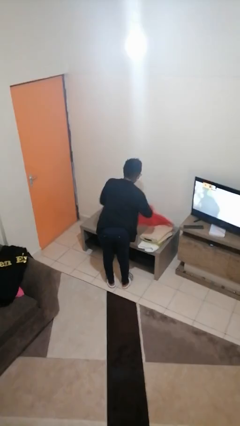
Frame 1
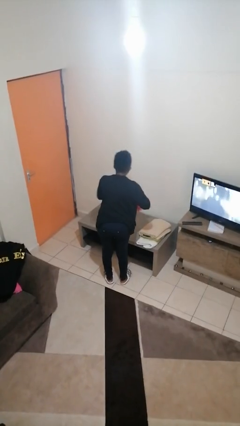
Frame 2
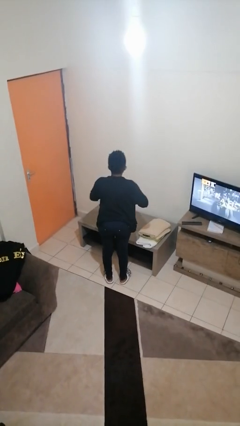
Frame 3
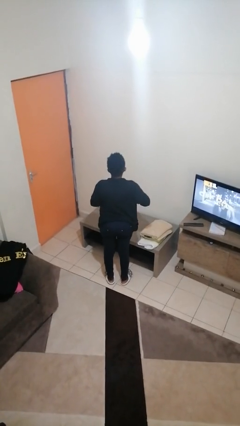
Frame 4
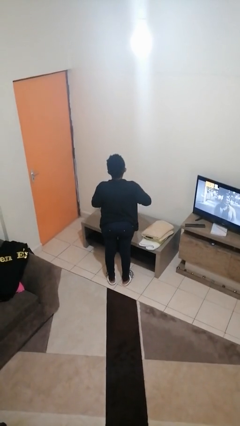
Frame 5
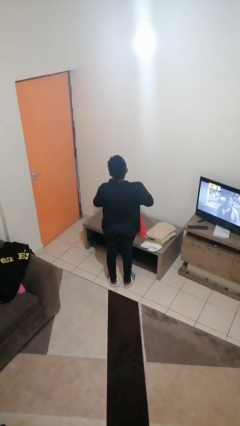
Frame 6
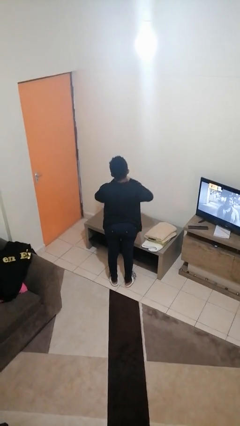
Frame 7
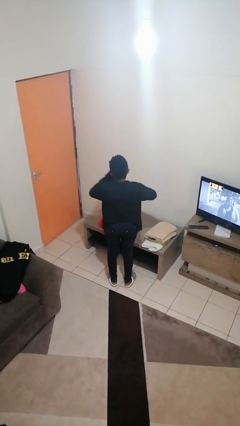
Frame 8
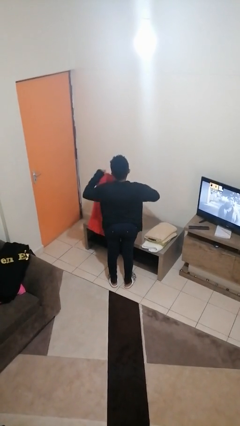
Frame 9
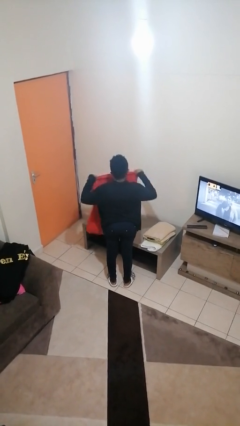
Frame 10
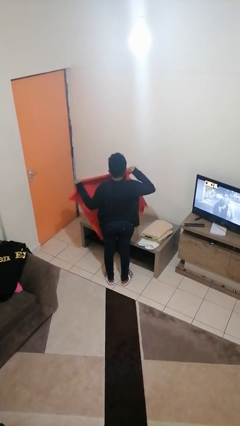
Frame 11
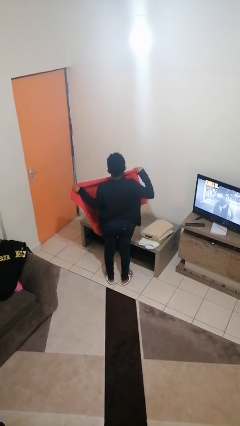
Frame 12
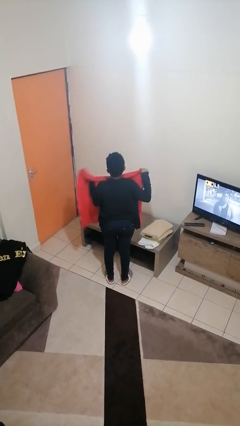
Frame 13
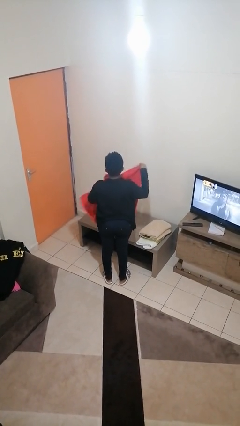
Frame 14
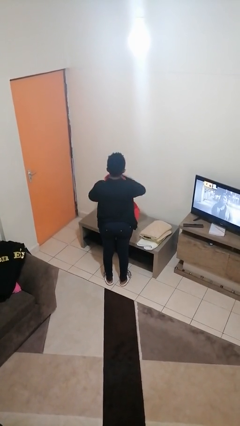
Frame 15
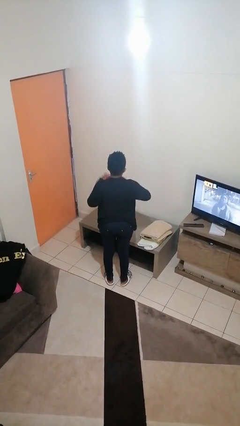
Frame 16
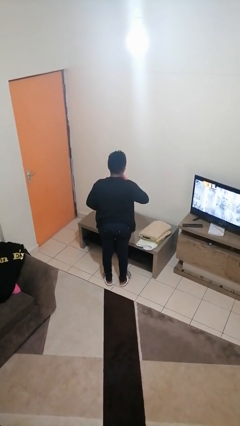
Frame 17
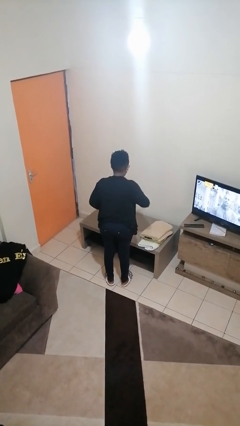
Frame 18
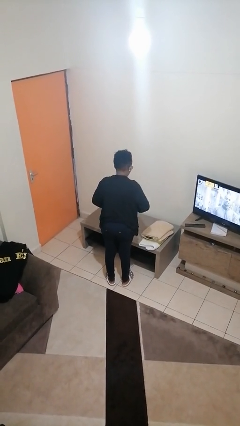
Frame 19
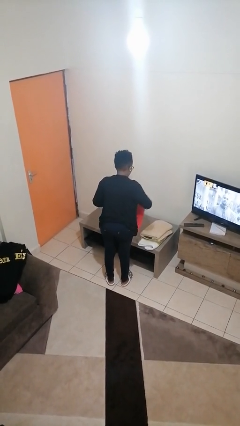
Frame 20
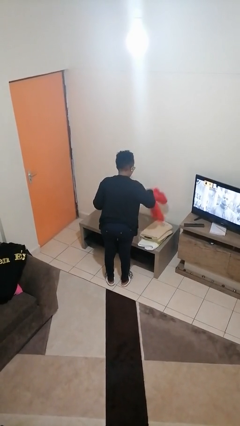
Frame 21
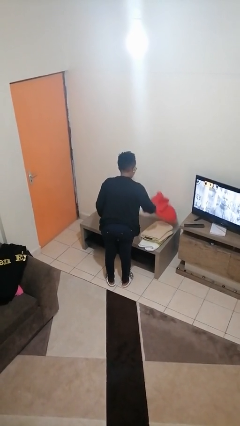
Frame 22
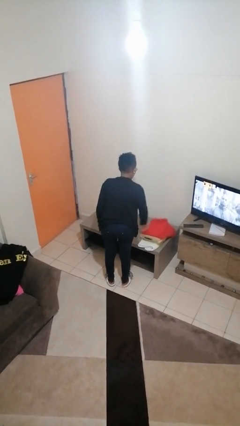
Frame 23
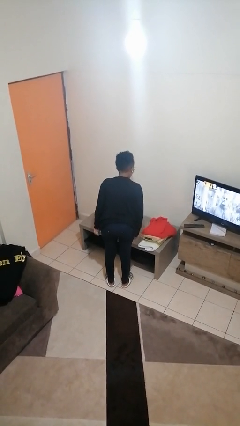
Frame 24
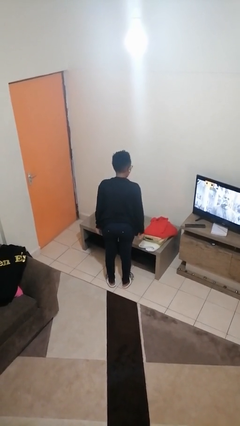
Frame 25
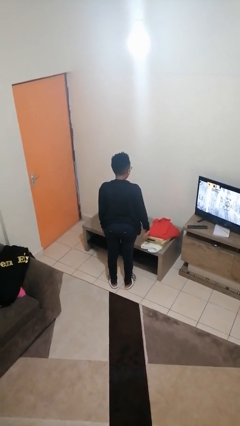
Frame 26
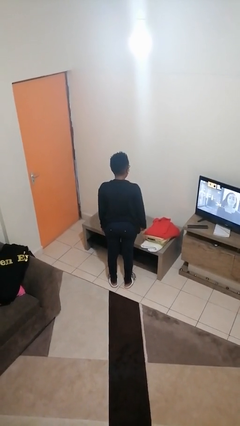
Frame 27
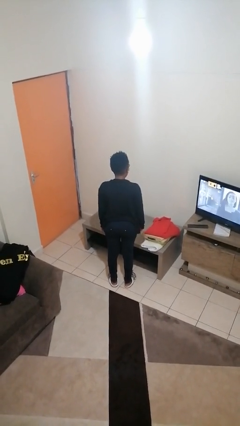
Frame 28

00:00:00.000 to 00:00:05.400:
person folds towel

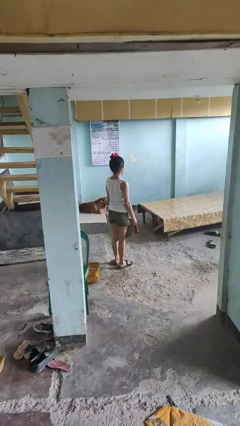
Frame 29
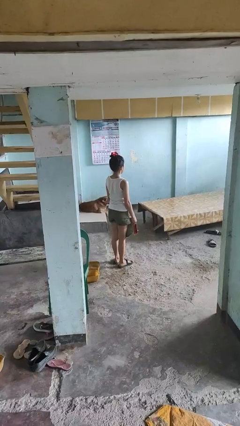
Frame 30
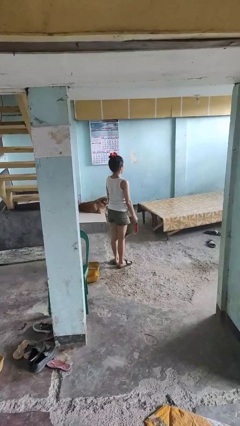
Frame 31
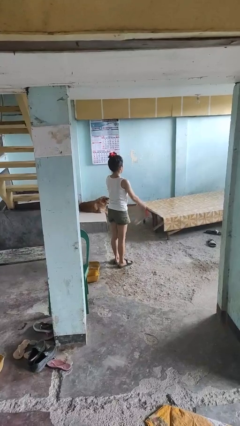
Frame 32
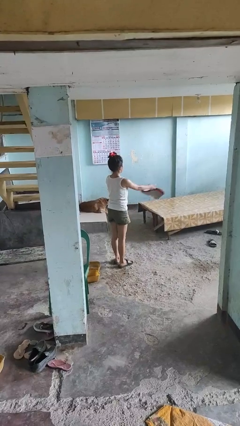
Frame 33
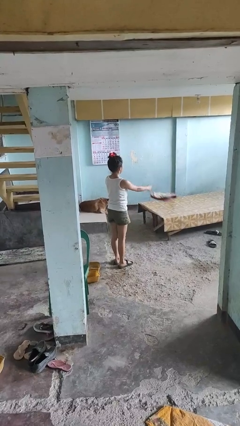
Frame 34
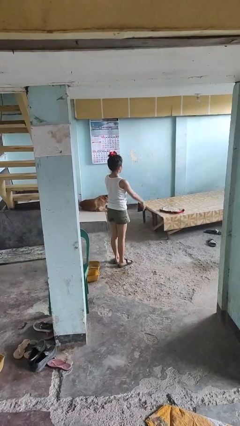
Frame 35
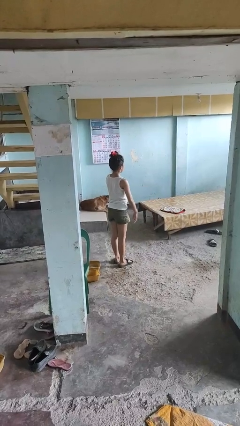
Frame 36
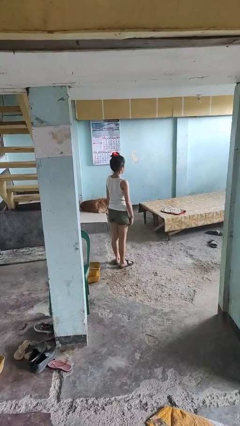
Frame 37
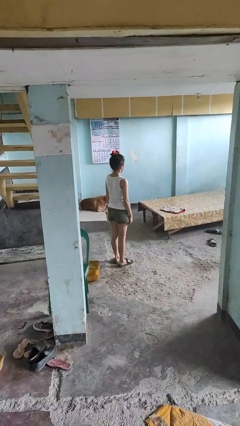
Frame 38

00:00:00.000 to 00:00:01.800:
person throws object on table

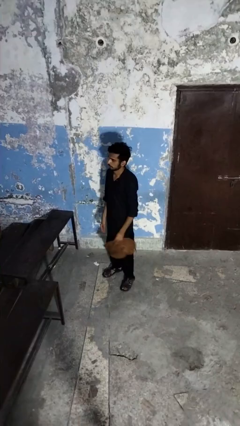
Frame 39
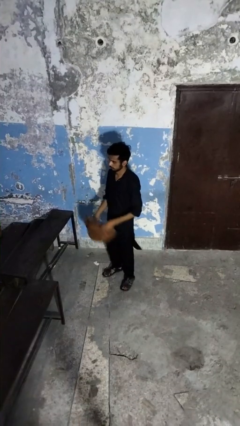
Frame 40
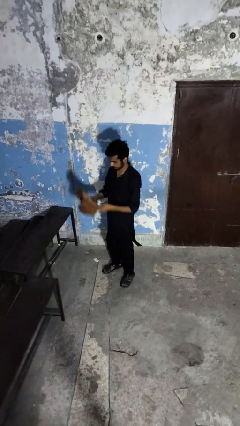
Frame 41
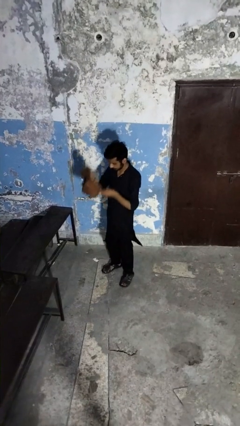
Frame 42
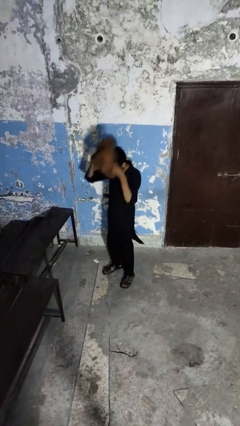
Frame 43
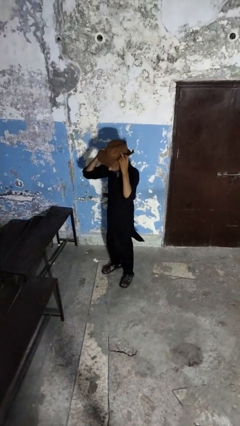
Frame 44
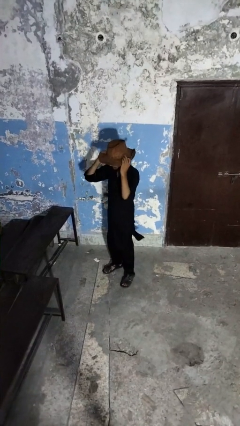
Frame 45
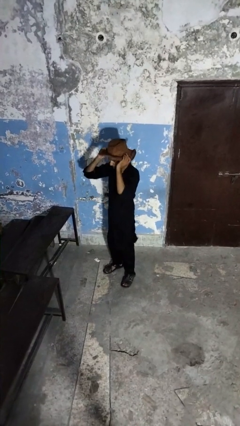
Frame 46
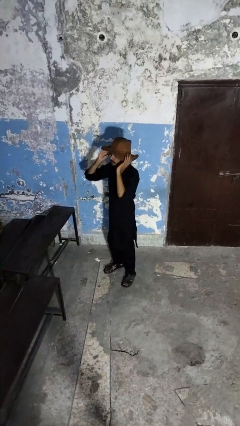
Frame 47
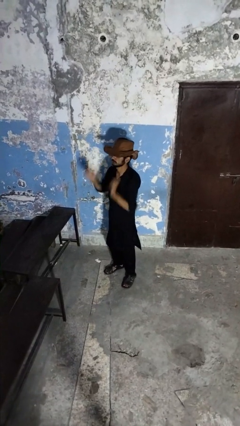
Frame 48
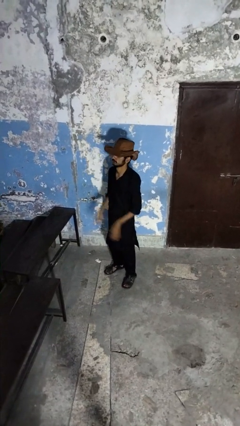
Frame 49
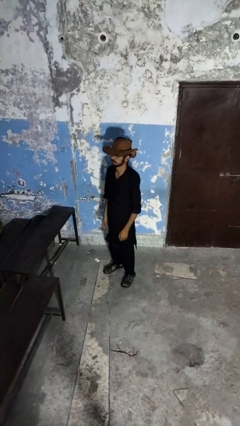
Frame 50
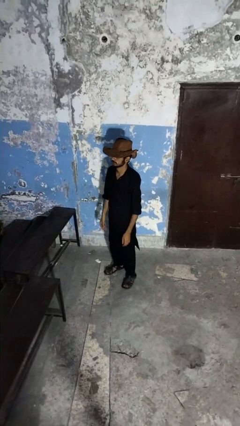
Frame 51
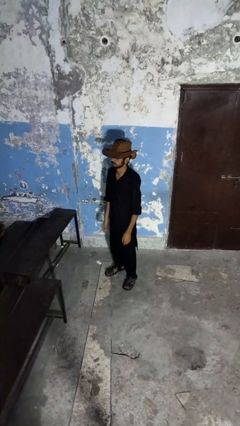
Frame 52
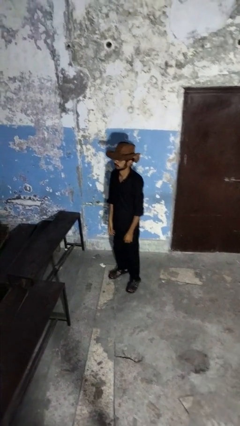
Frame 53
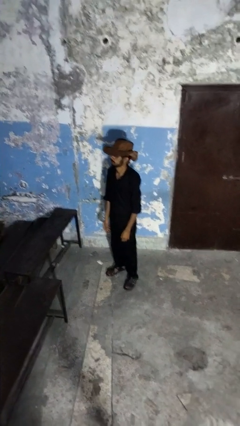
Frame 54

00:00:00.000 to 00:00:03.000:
person puts on hat

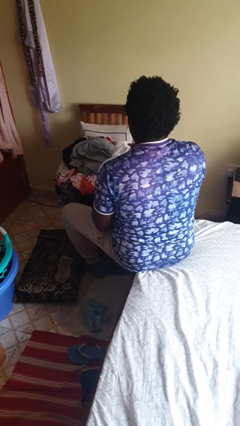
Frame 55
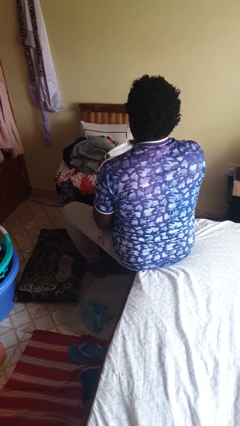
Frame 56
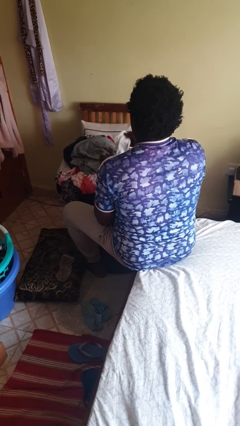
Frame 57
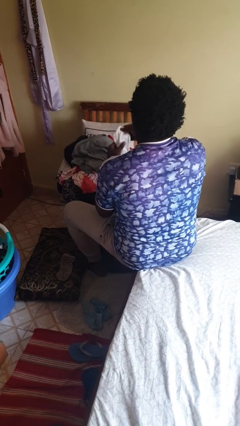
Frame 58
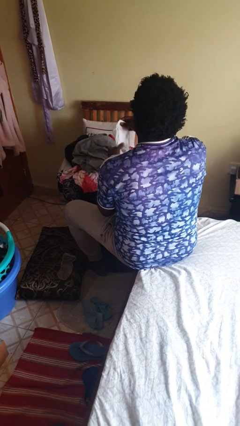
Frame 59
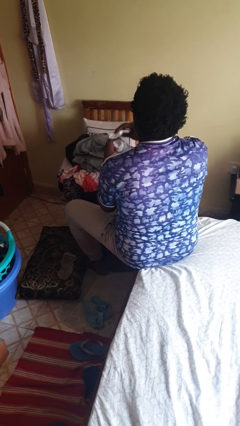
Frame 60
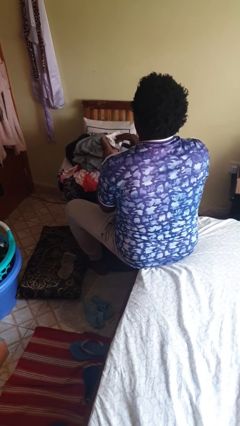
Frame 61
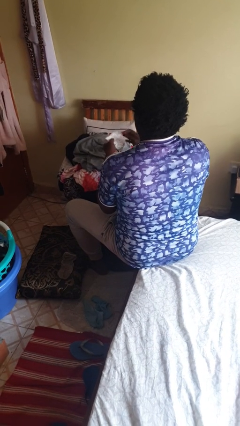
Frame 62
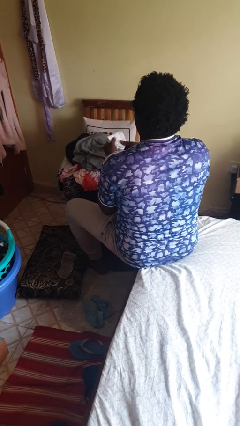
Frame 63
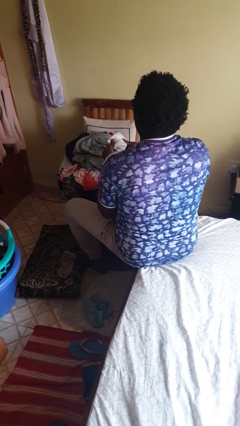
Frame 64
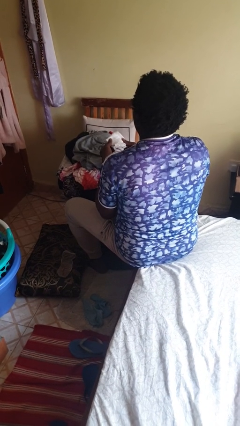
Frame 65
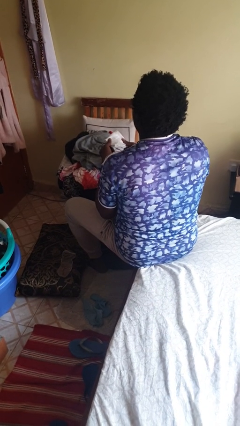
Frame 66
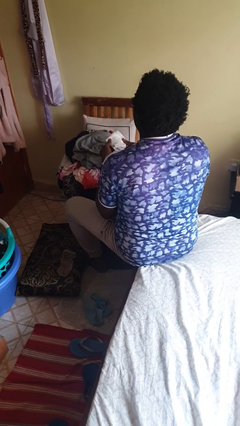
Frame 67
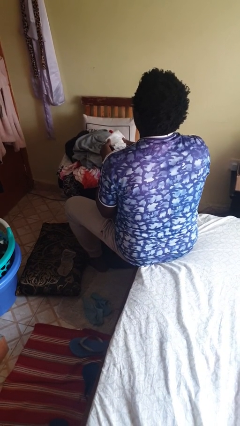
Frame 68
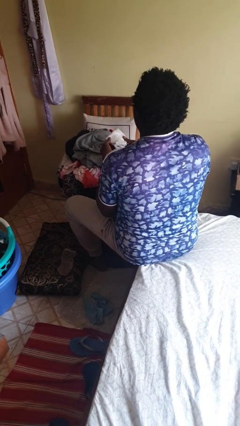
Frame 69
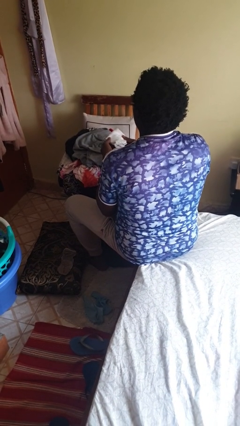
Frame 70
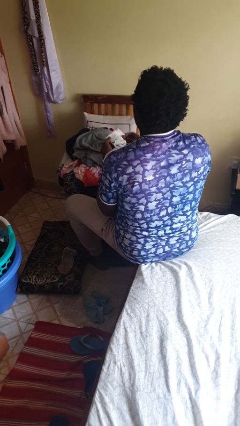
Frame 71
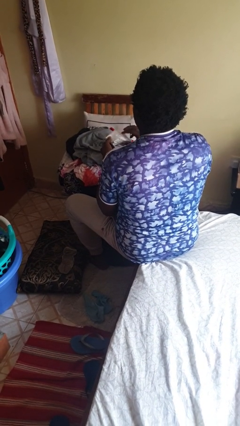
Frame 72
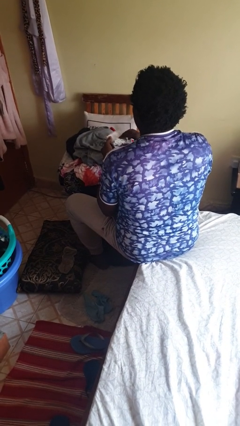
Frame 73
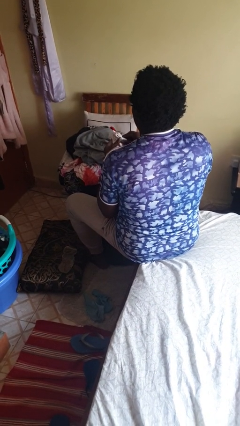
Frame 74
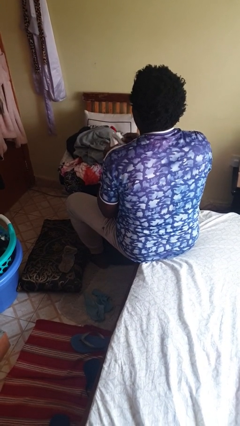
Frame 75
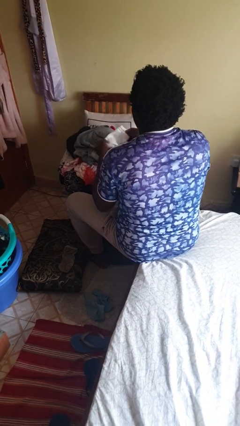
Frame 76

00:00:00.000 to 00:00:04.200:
person folds socks

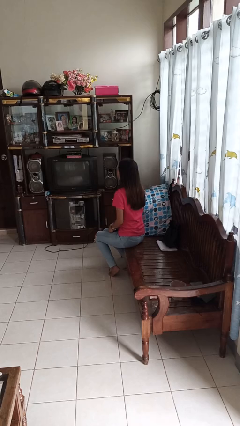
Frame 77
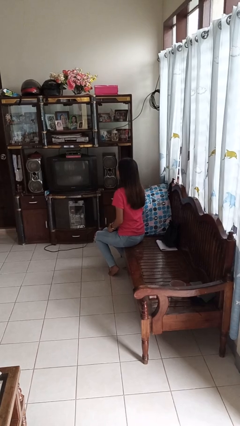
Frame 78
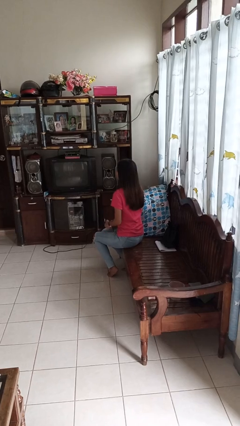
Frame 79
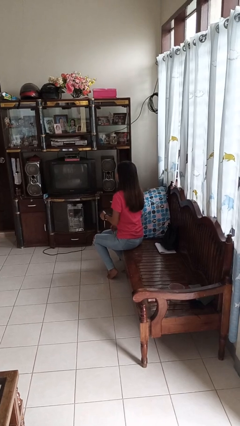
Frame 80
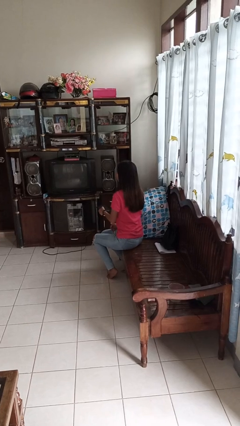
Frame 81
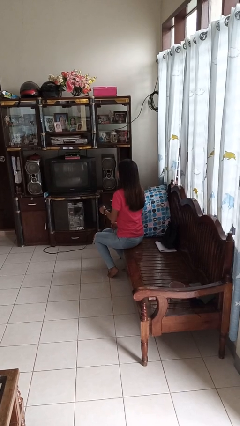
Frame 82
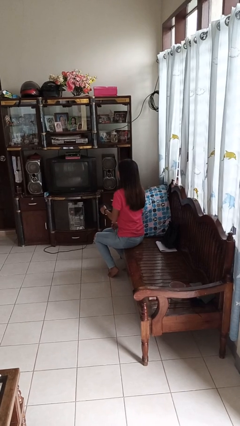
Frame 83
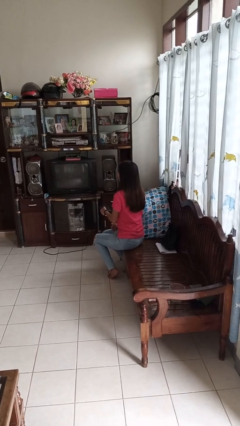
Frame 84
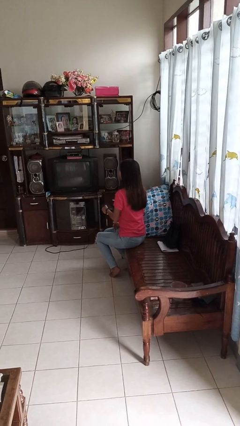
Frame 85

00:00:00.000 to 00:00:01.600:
person uses television remote

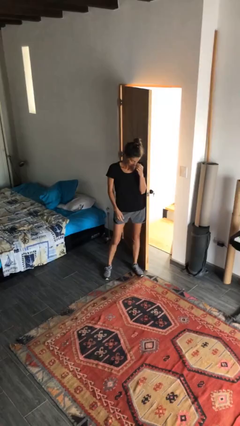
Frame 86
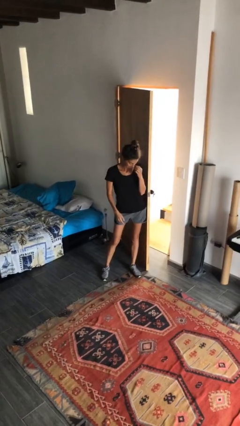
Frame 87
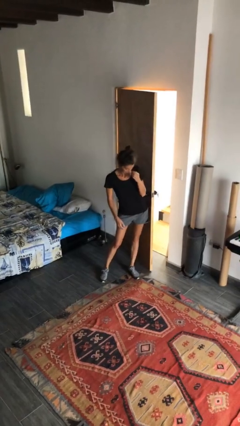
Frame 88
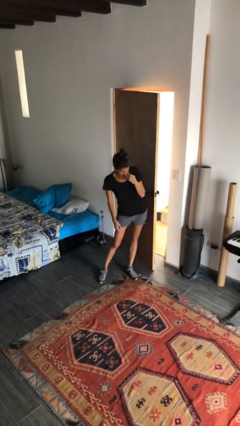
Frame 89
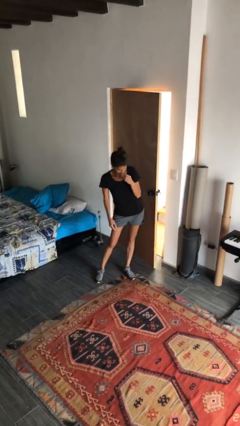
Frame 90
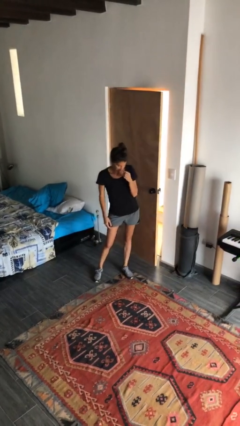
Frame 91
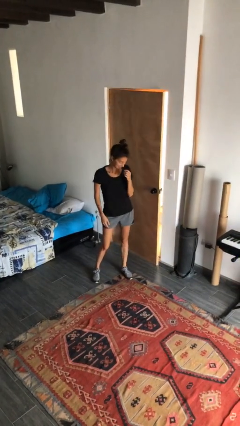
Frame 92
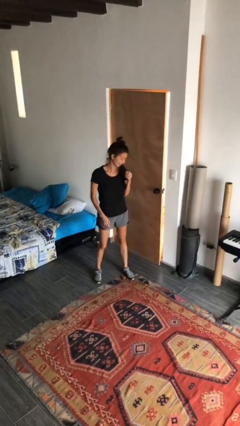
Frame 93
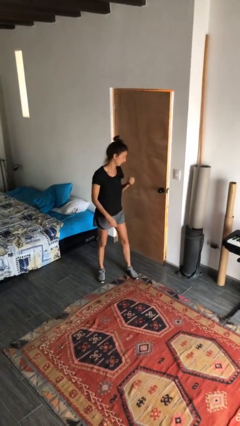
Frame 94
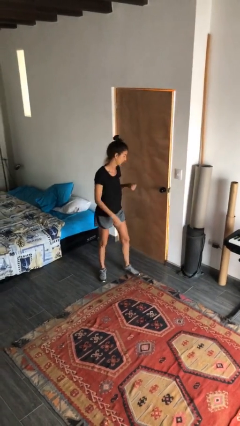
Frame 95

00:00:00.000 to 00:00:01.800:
person closes door with hip
